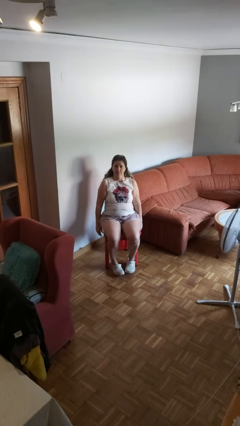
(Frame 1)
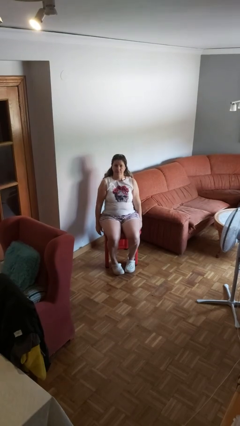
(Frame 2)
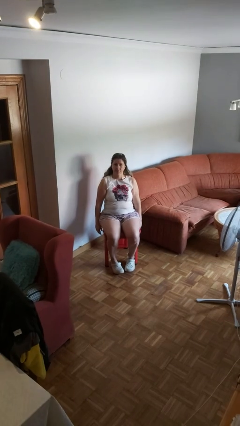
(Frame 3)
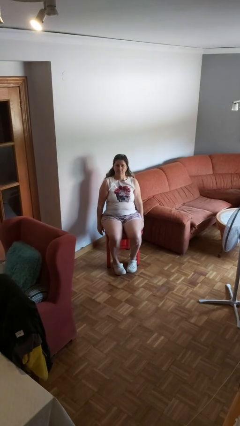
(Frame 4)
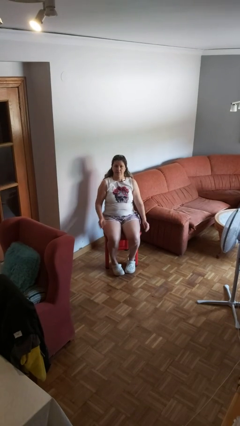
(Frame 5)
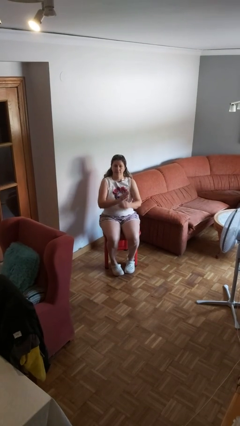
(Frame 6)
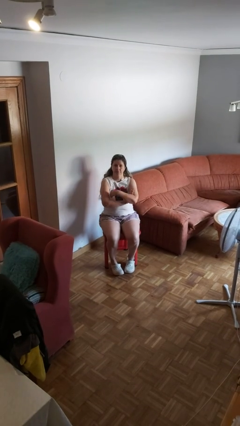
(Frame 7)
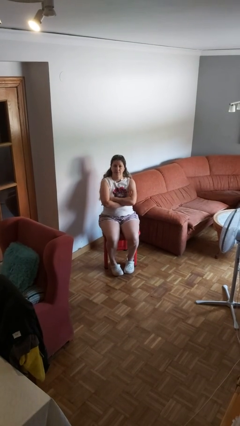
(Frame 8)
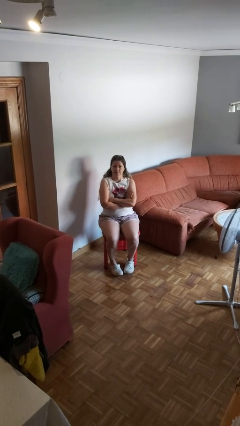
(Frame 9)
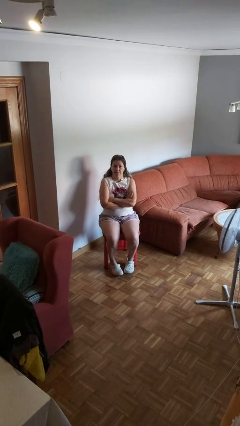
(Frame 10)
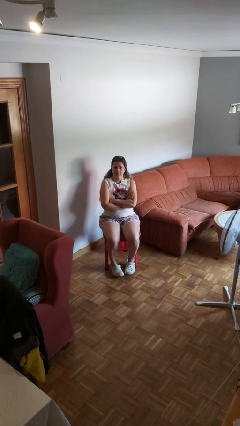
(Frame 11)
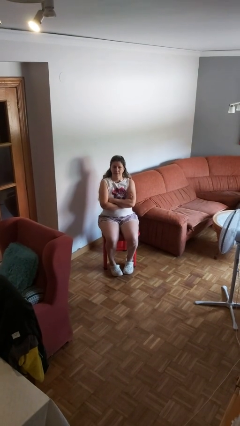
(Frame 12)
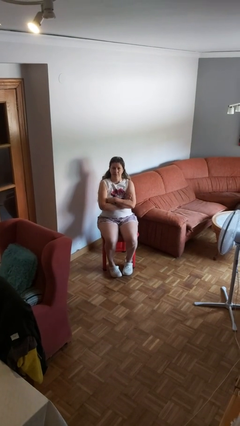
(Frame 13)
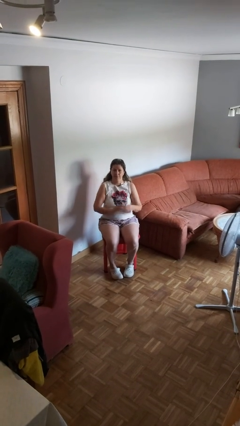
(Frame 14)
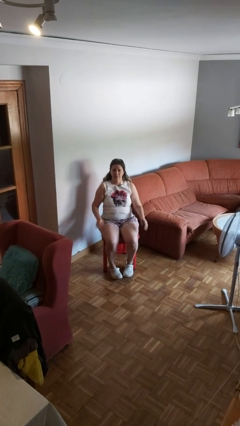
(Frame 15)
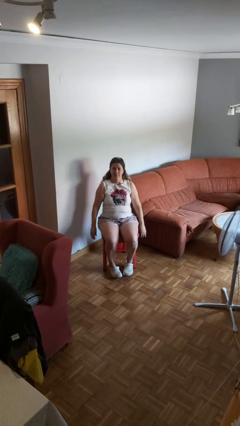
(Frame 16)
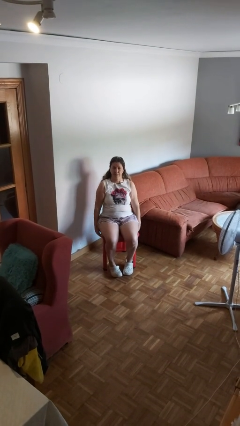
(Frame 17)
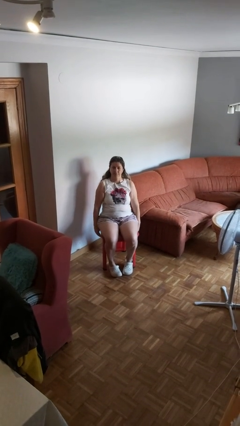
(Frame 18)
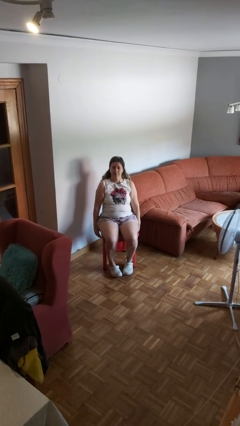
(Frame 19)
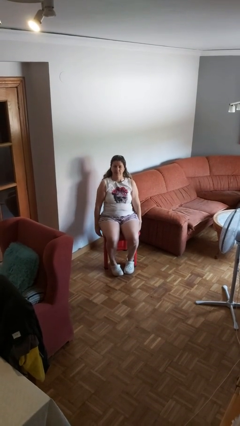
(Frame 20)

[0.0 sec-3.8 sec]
person crosses arms

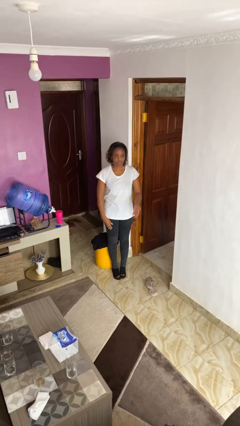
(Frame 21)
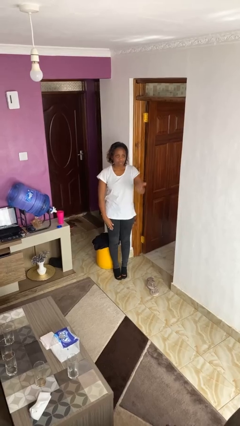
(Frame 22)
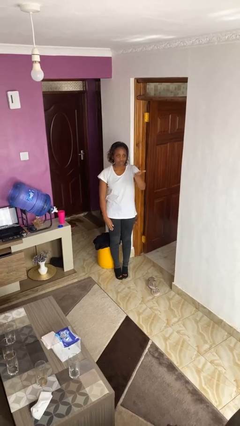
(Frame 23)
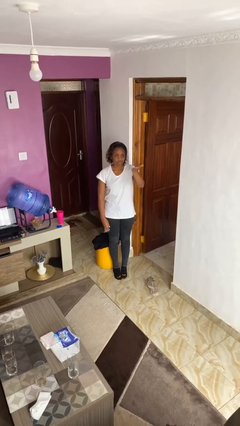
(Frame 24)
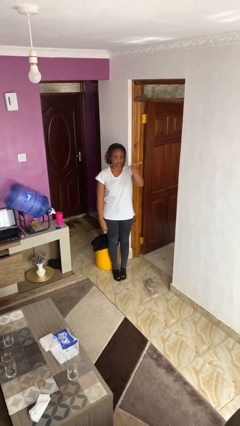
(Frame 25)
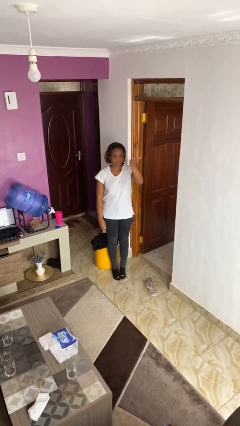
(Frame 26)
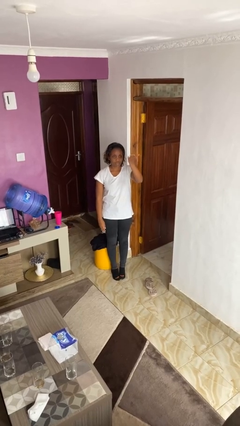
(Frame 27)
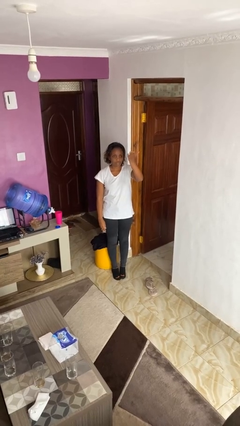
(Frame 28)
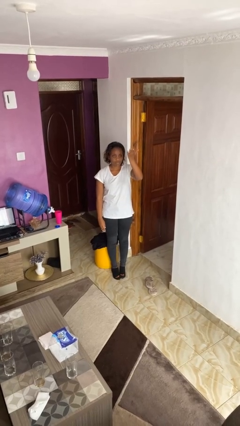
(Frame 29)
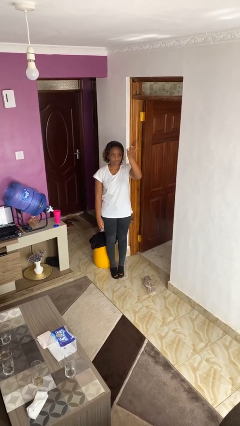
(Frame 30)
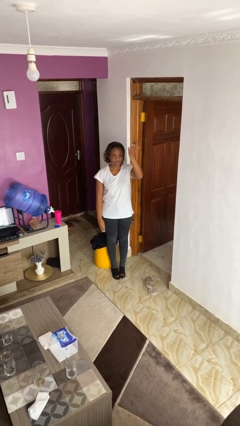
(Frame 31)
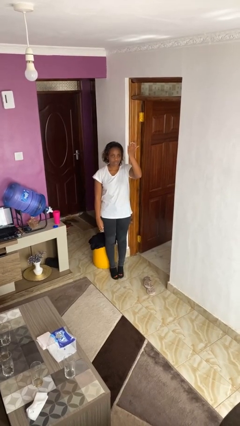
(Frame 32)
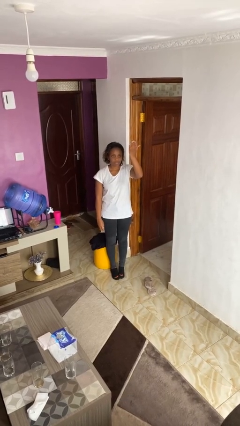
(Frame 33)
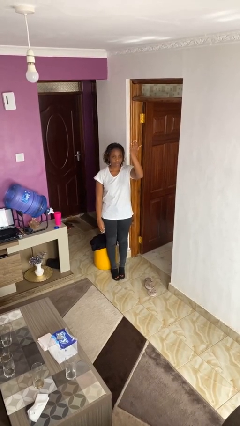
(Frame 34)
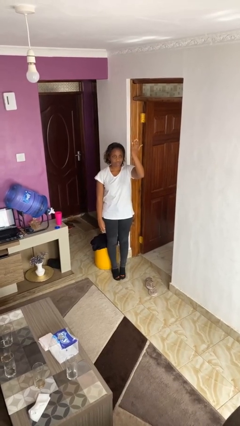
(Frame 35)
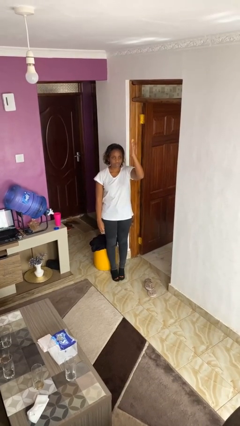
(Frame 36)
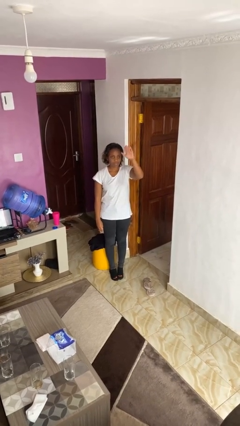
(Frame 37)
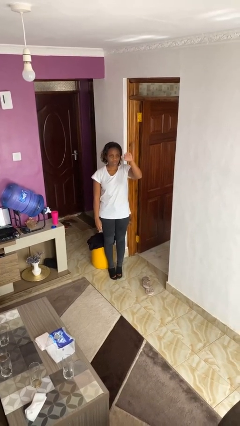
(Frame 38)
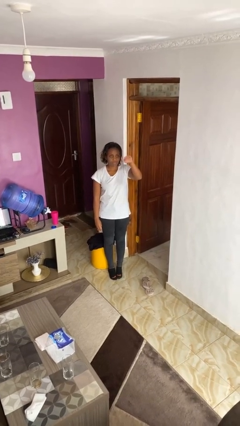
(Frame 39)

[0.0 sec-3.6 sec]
person gestures swipe up

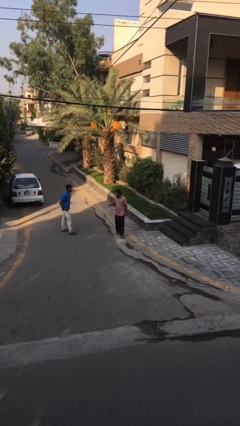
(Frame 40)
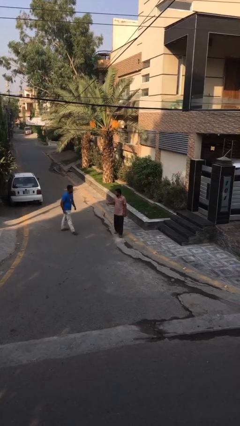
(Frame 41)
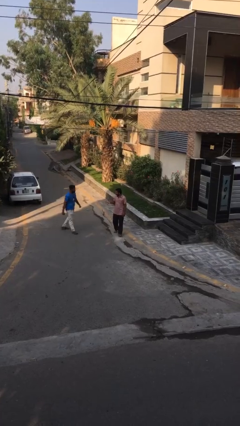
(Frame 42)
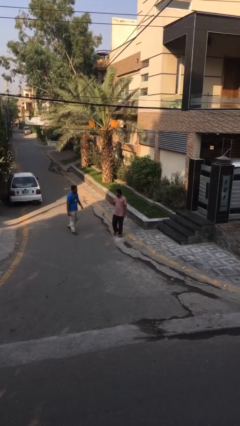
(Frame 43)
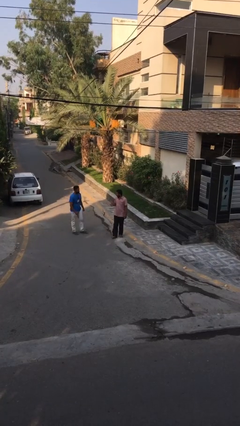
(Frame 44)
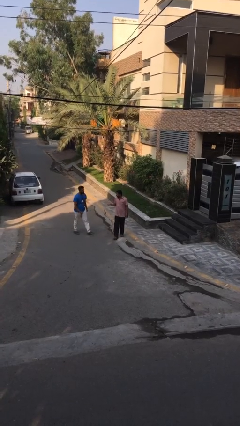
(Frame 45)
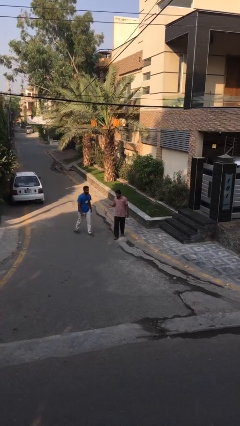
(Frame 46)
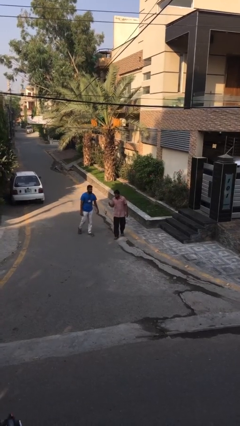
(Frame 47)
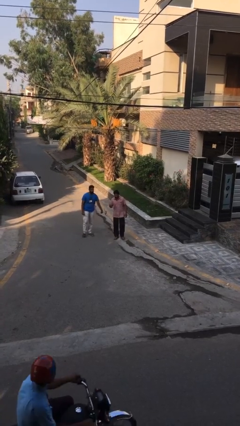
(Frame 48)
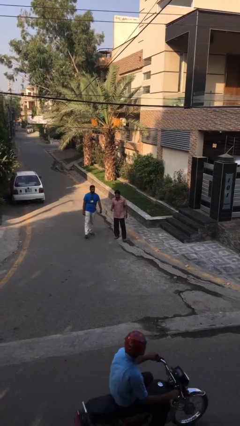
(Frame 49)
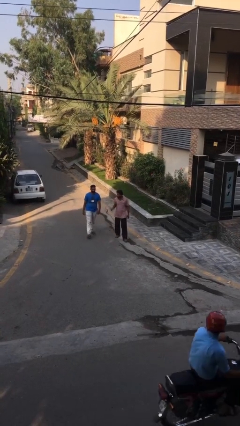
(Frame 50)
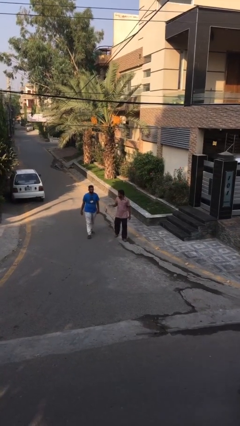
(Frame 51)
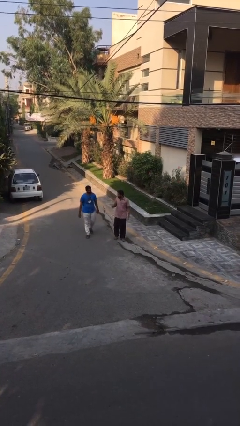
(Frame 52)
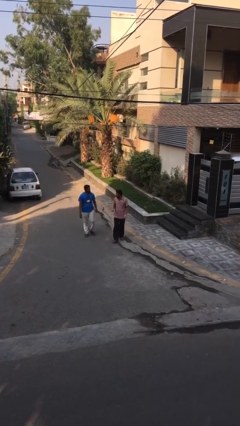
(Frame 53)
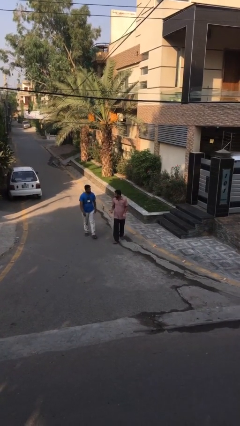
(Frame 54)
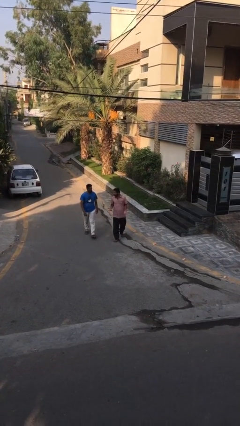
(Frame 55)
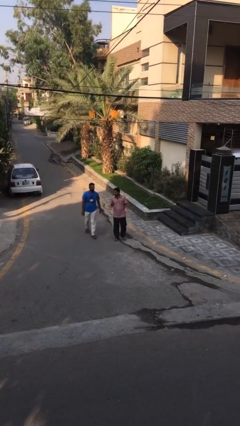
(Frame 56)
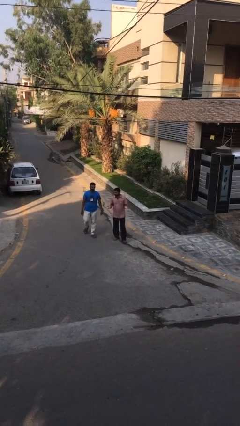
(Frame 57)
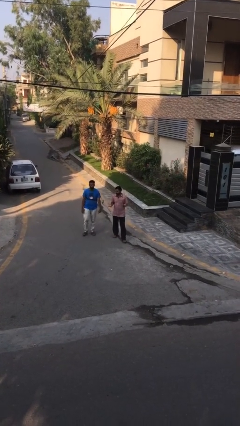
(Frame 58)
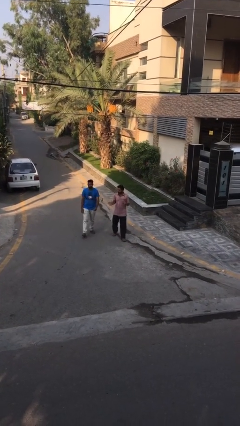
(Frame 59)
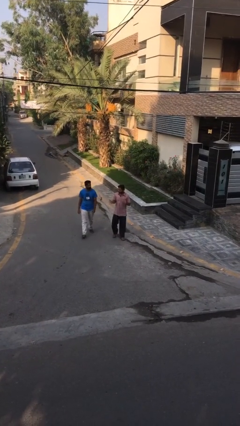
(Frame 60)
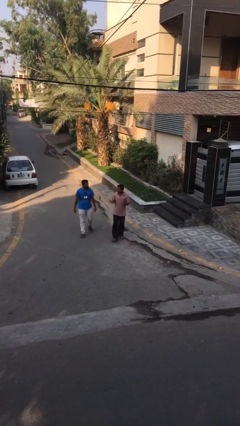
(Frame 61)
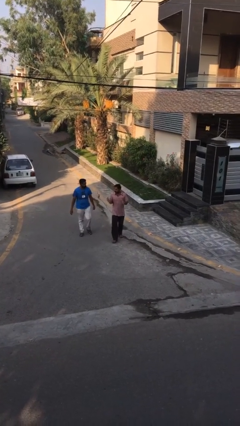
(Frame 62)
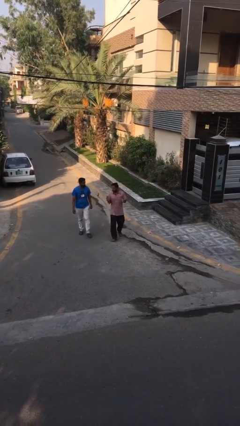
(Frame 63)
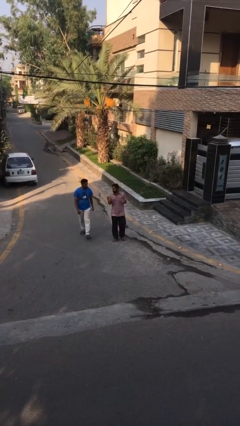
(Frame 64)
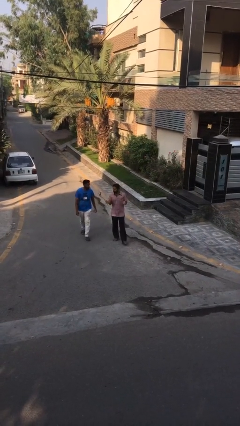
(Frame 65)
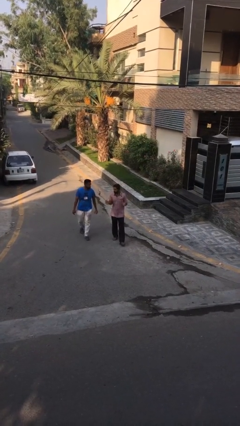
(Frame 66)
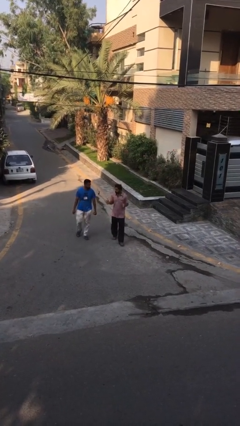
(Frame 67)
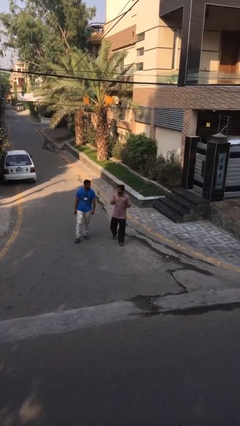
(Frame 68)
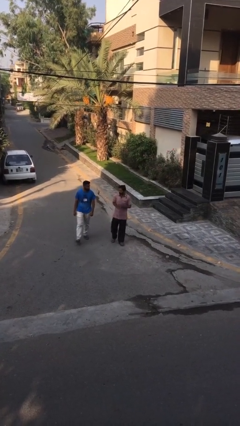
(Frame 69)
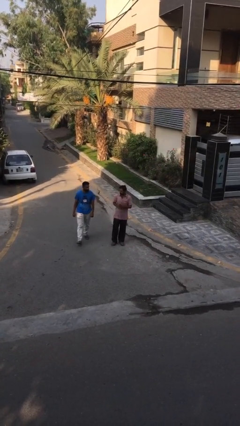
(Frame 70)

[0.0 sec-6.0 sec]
person talks to person

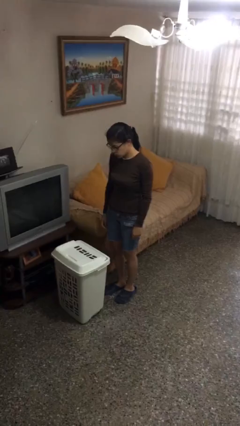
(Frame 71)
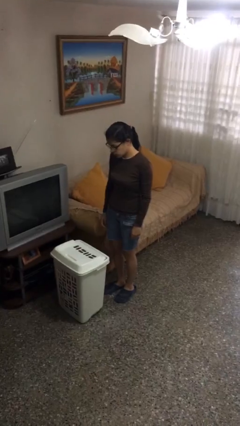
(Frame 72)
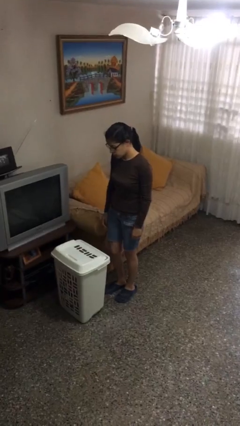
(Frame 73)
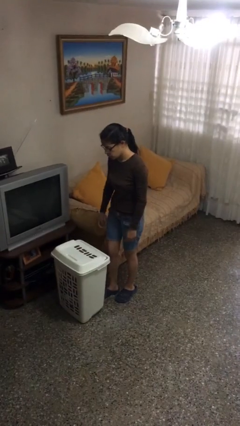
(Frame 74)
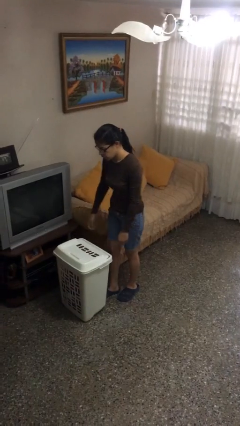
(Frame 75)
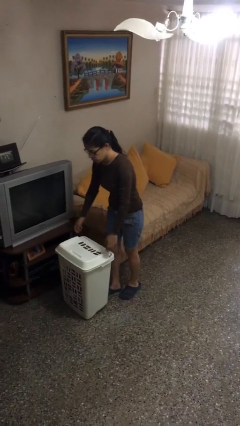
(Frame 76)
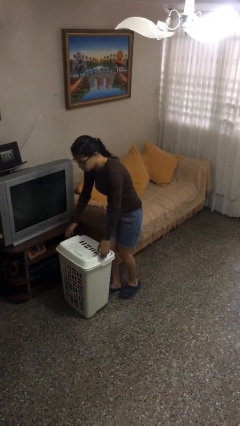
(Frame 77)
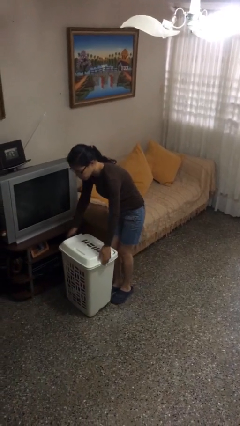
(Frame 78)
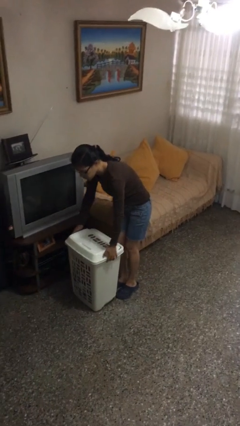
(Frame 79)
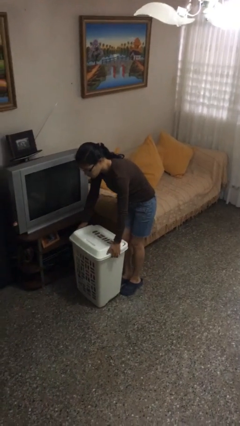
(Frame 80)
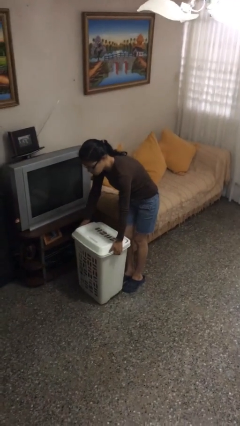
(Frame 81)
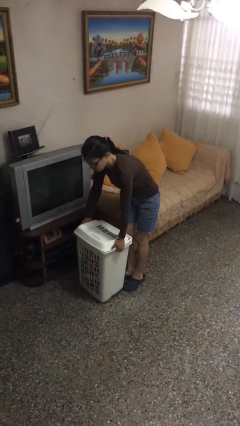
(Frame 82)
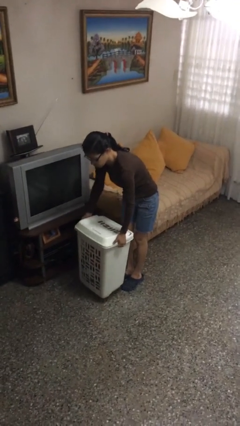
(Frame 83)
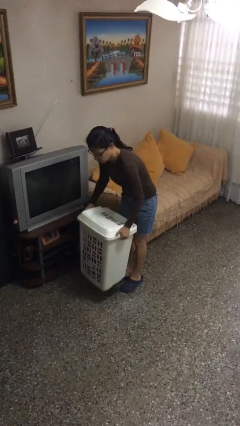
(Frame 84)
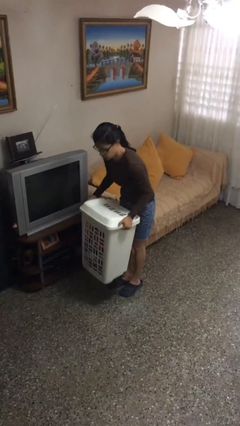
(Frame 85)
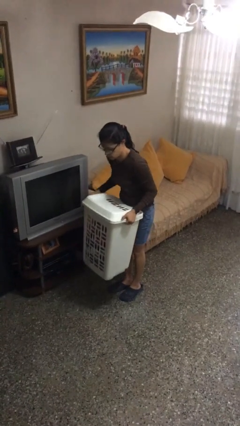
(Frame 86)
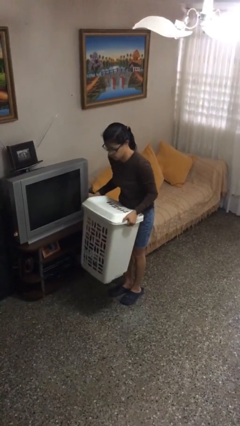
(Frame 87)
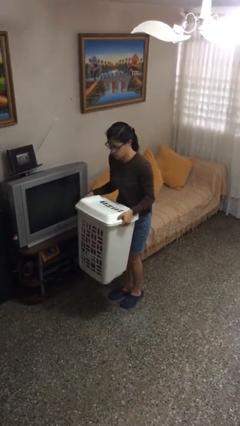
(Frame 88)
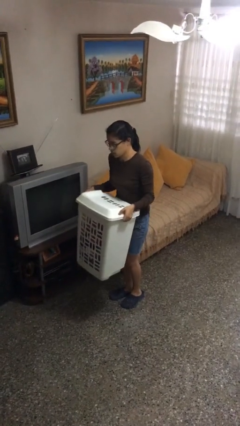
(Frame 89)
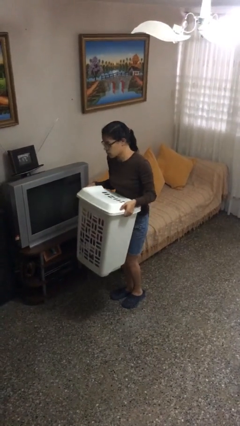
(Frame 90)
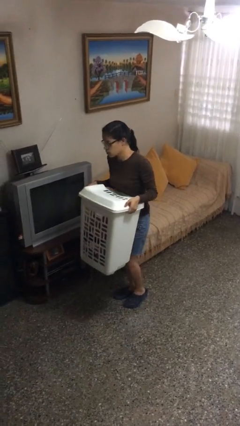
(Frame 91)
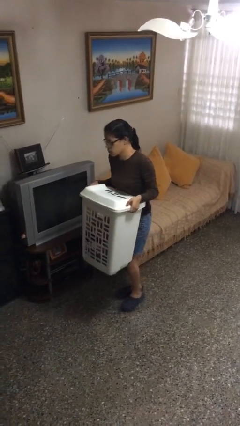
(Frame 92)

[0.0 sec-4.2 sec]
person picks up object from floor
